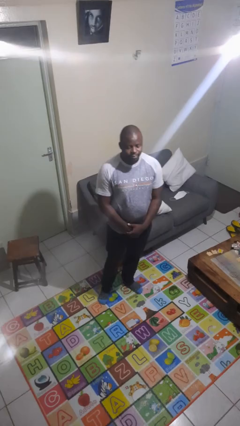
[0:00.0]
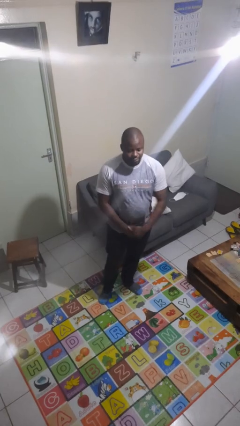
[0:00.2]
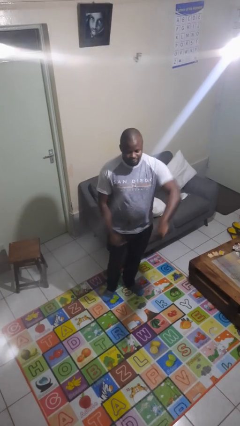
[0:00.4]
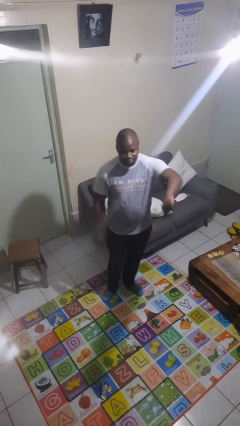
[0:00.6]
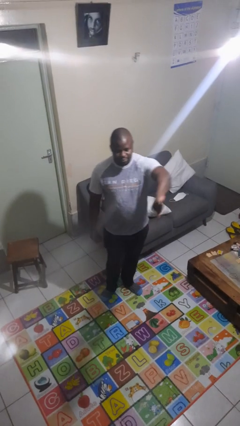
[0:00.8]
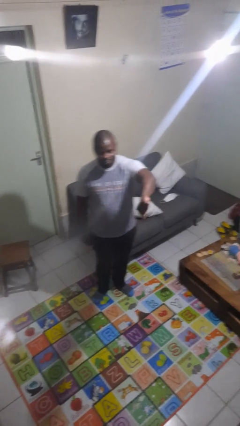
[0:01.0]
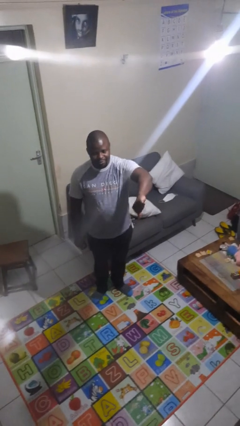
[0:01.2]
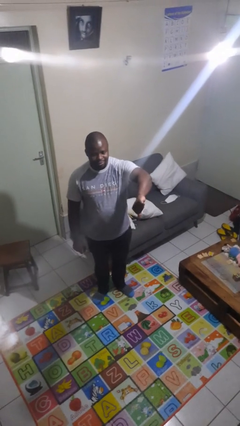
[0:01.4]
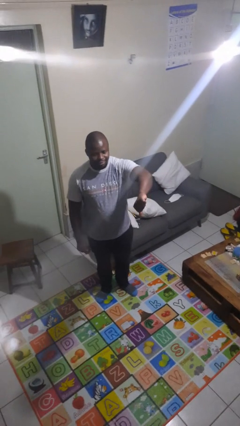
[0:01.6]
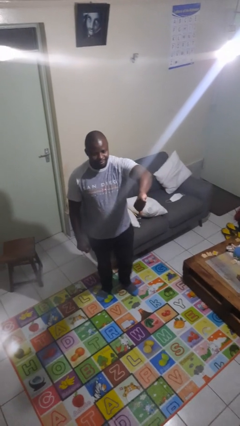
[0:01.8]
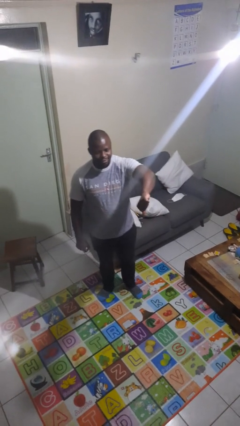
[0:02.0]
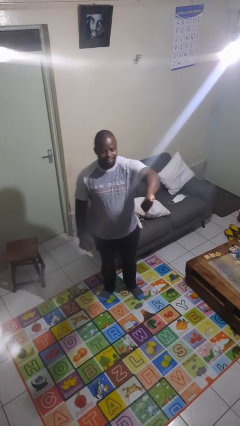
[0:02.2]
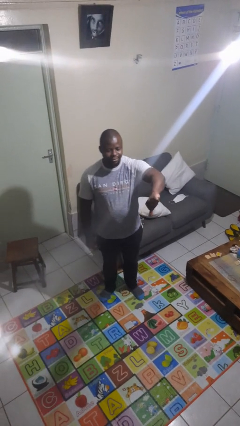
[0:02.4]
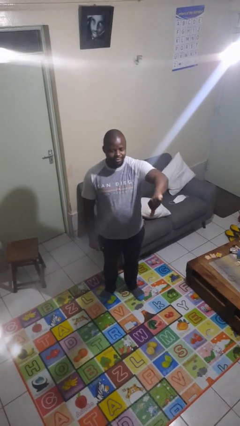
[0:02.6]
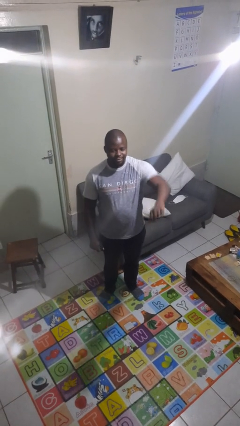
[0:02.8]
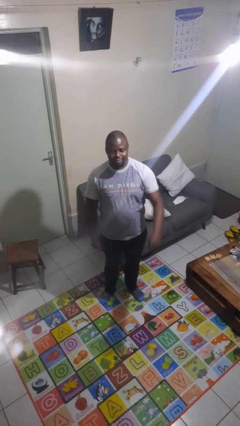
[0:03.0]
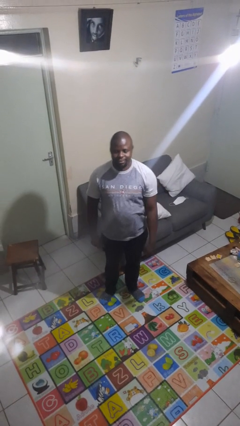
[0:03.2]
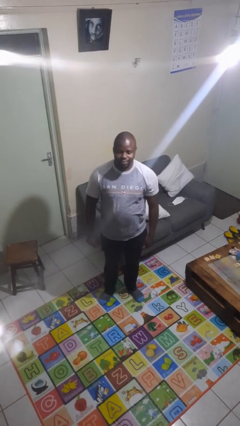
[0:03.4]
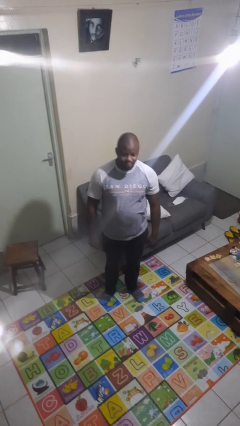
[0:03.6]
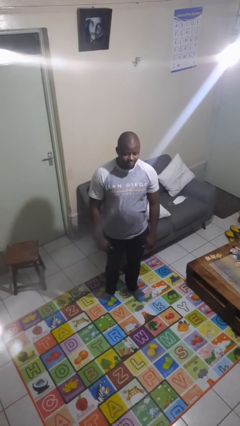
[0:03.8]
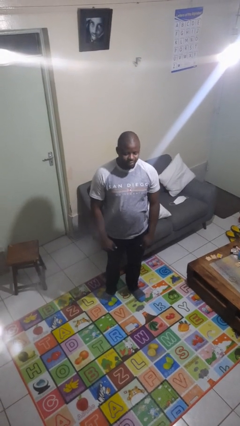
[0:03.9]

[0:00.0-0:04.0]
person gestures thumbs down

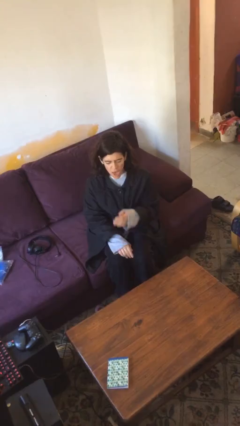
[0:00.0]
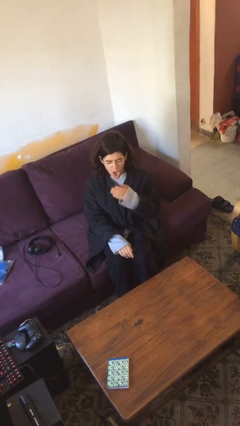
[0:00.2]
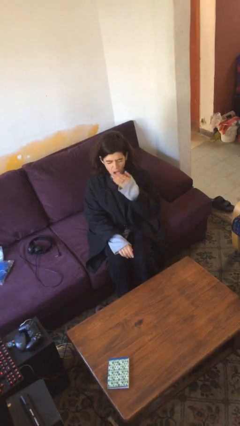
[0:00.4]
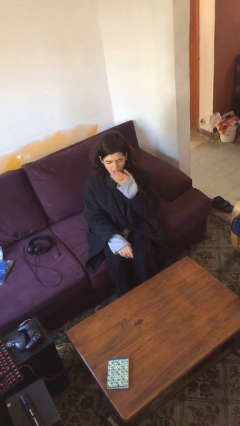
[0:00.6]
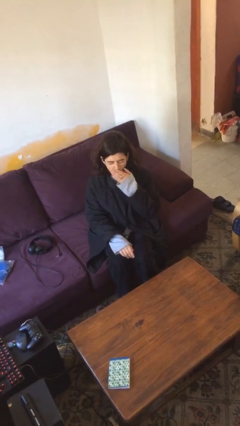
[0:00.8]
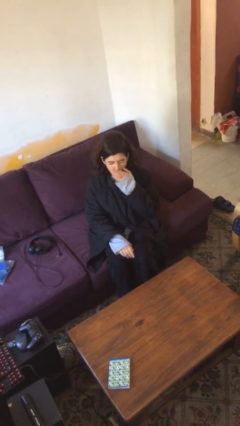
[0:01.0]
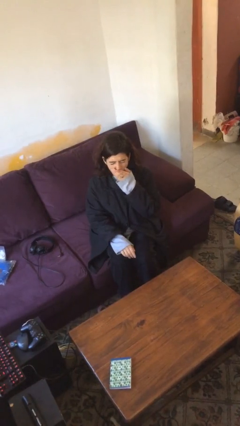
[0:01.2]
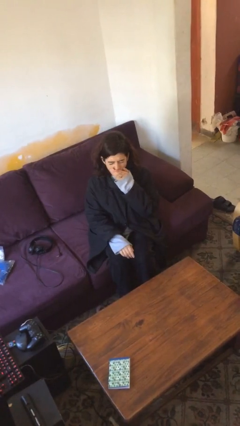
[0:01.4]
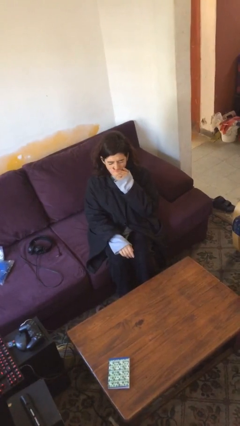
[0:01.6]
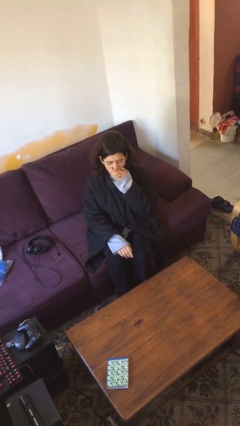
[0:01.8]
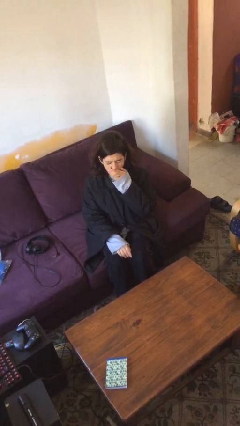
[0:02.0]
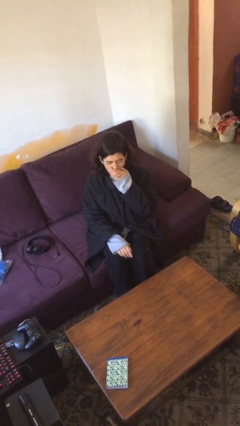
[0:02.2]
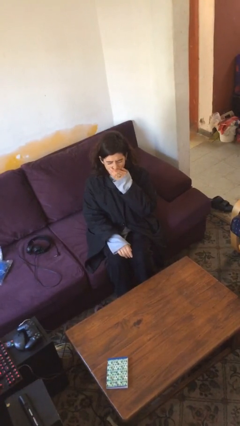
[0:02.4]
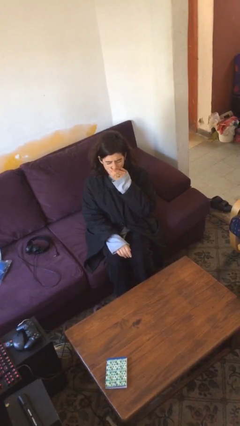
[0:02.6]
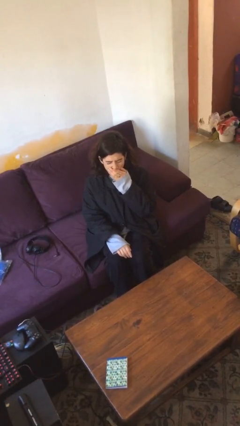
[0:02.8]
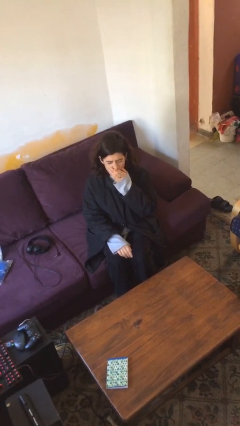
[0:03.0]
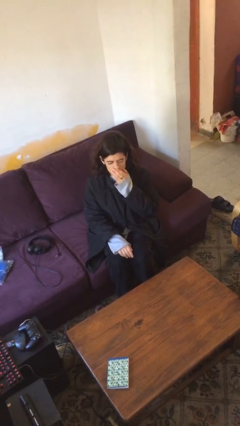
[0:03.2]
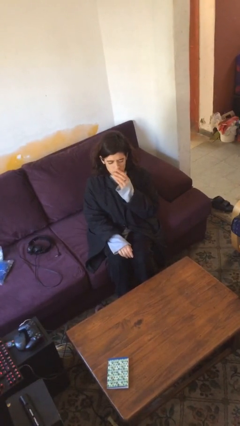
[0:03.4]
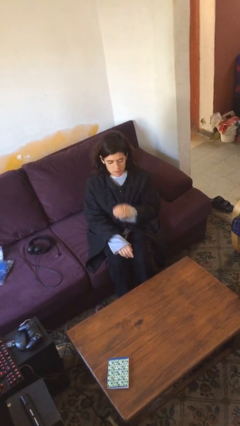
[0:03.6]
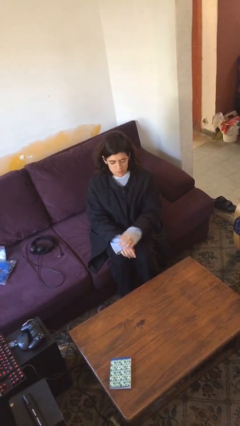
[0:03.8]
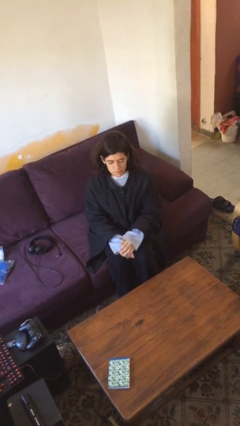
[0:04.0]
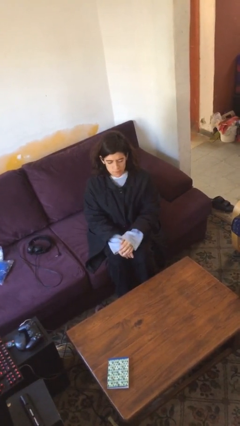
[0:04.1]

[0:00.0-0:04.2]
person yawns

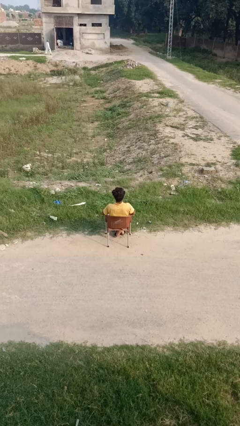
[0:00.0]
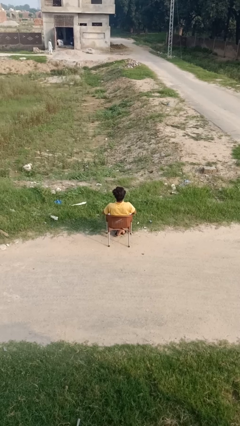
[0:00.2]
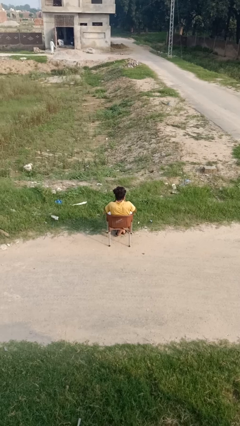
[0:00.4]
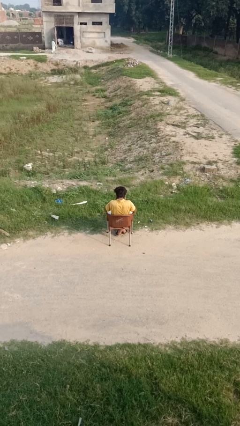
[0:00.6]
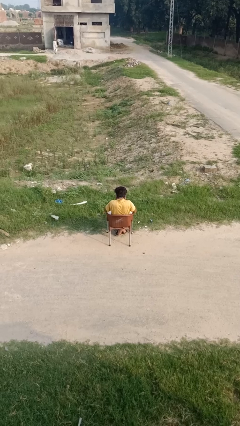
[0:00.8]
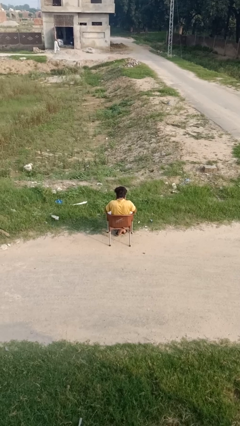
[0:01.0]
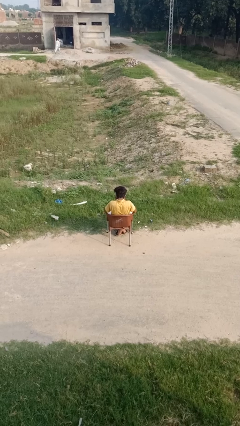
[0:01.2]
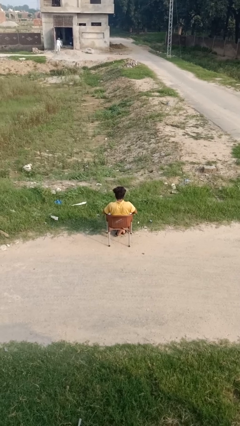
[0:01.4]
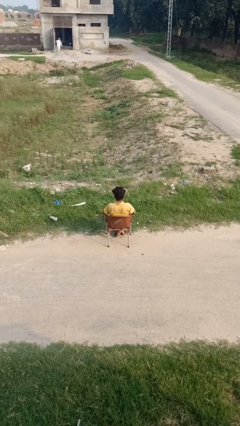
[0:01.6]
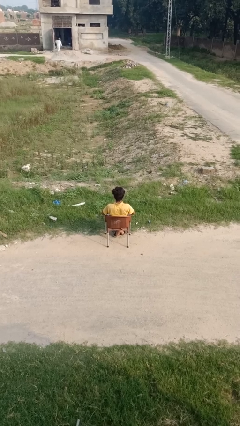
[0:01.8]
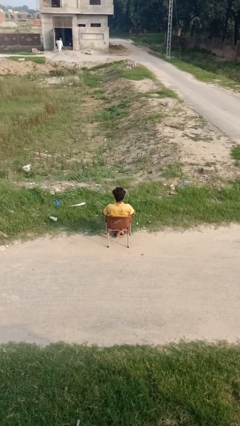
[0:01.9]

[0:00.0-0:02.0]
person sneezes into hand

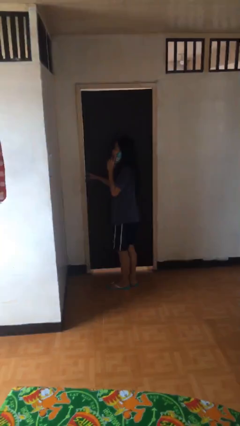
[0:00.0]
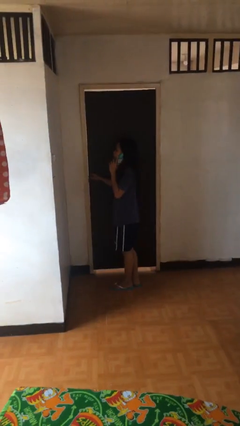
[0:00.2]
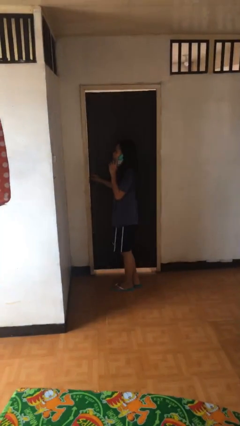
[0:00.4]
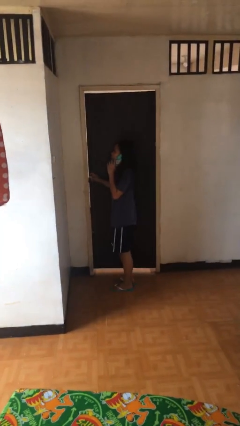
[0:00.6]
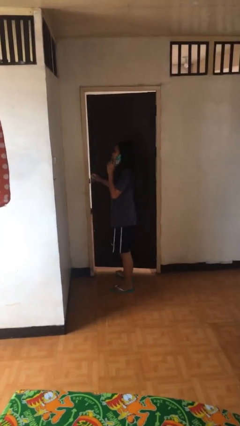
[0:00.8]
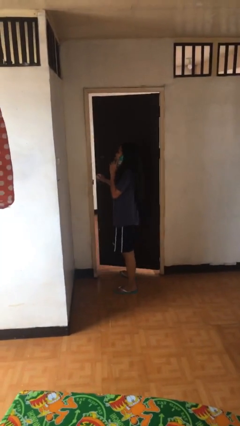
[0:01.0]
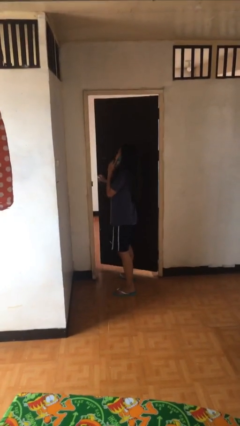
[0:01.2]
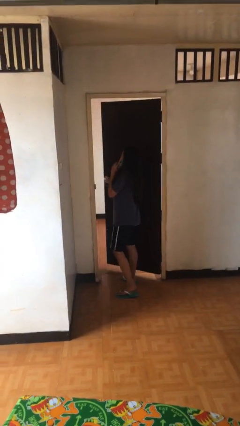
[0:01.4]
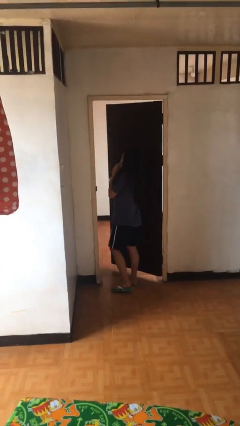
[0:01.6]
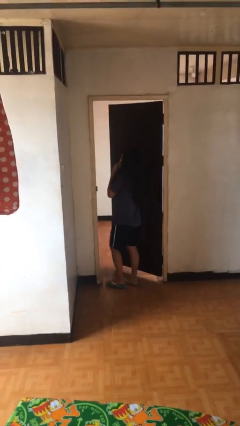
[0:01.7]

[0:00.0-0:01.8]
person opens facility door

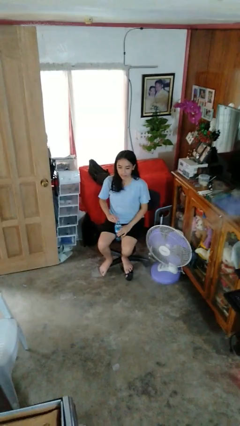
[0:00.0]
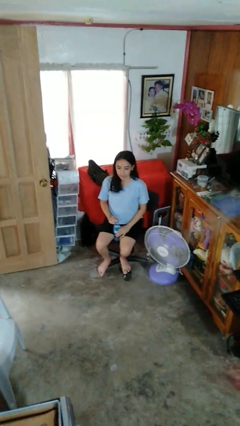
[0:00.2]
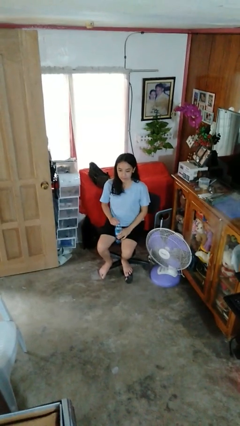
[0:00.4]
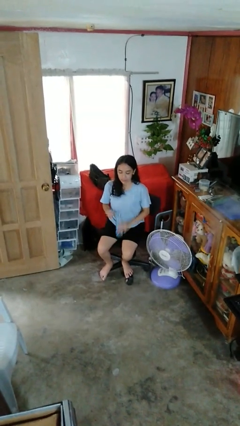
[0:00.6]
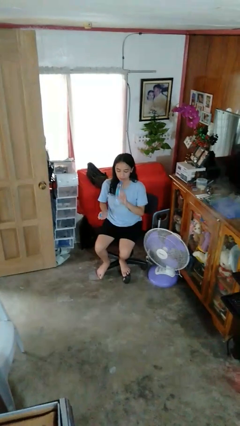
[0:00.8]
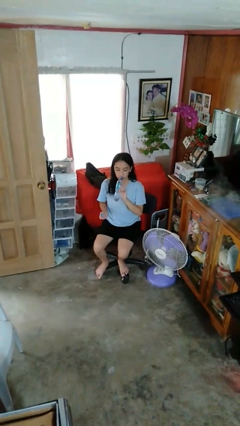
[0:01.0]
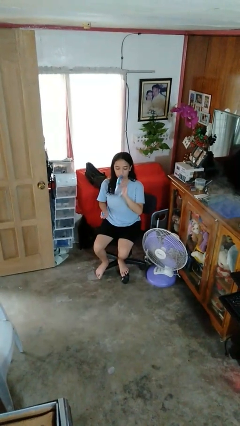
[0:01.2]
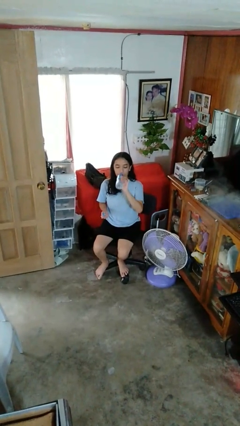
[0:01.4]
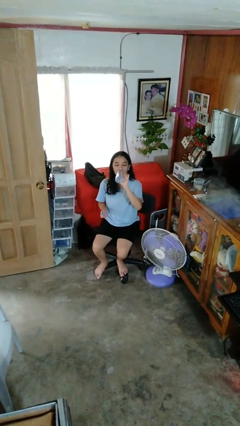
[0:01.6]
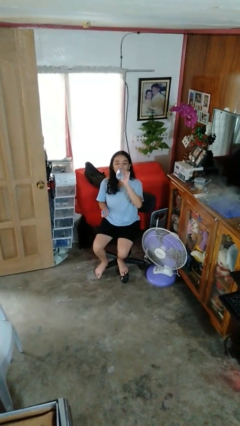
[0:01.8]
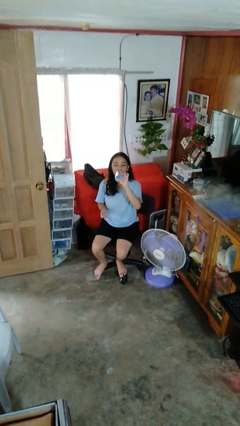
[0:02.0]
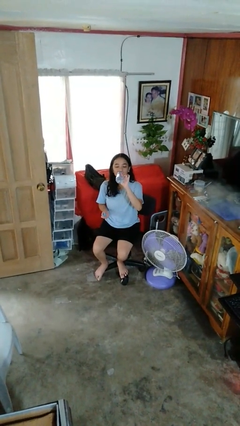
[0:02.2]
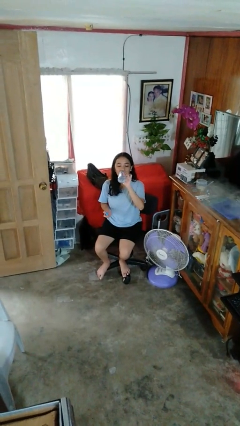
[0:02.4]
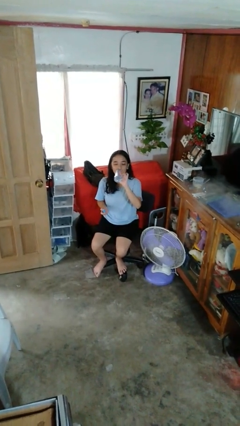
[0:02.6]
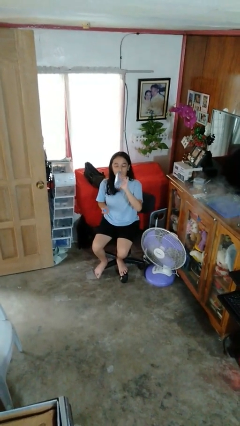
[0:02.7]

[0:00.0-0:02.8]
person drinks from bottle

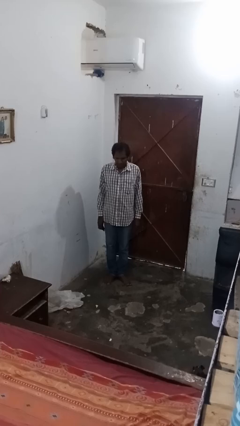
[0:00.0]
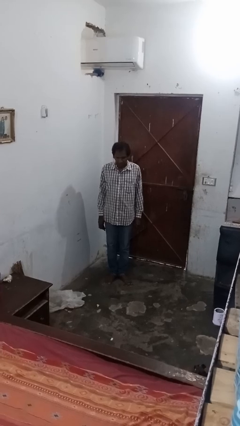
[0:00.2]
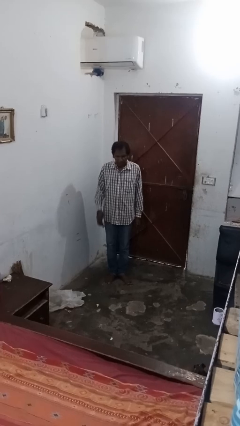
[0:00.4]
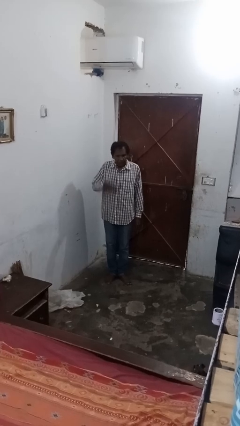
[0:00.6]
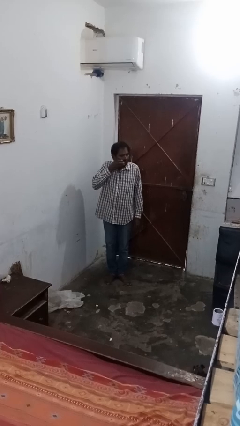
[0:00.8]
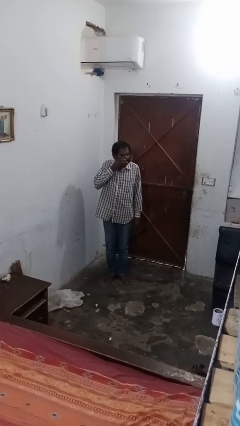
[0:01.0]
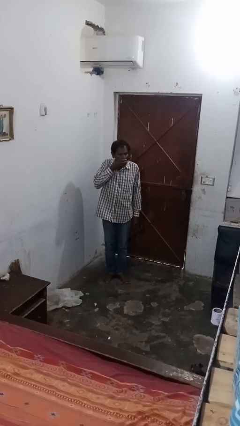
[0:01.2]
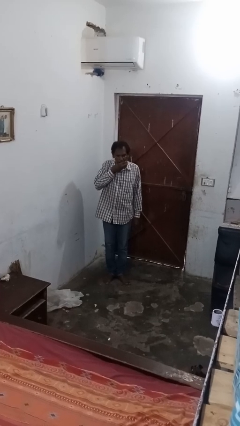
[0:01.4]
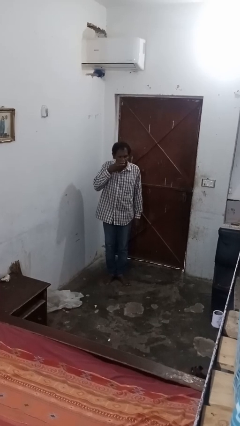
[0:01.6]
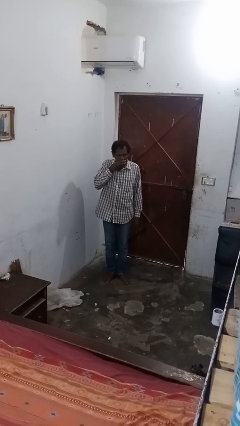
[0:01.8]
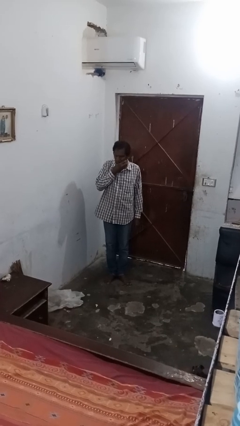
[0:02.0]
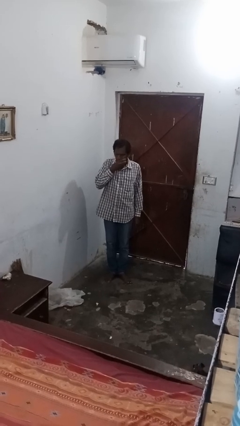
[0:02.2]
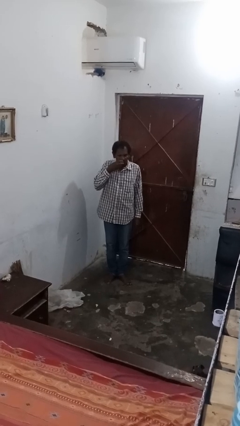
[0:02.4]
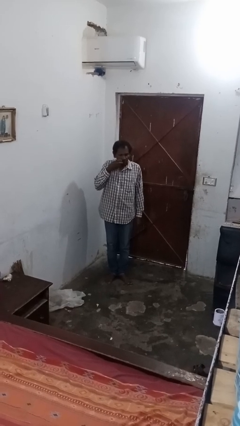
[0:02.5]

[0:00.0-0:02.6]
person wipes mouth with napkin
